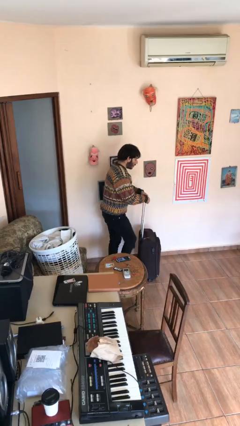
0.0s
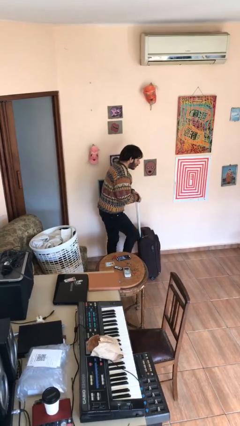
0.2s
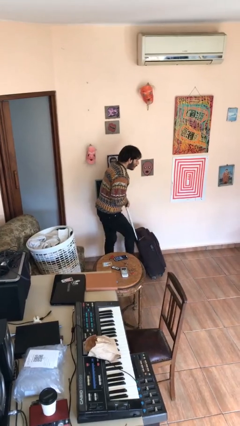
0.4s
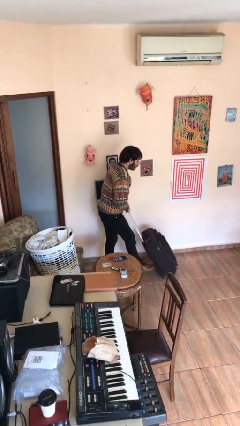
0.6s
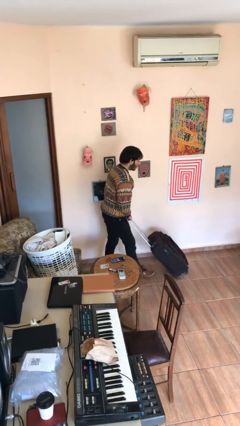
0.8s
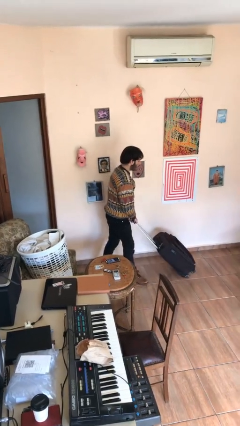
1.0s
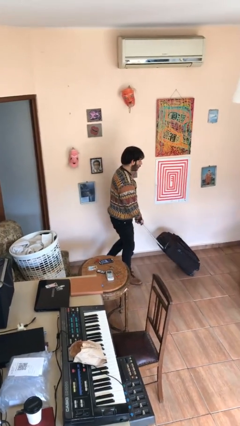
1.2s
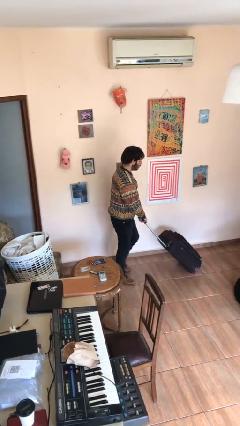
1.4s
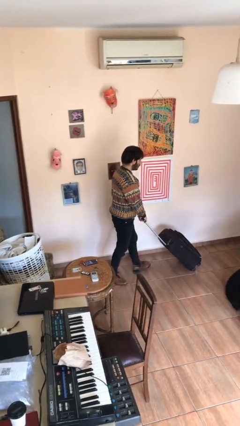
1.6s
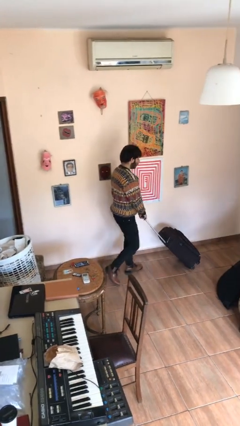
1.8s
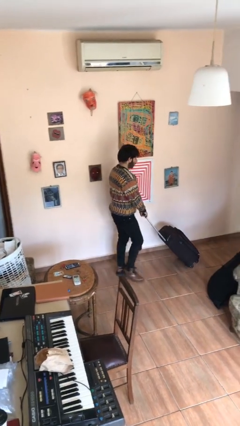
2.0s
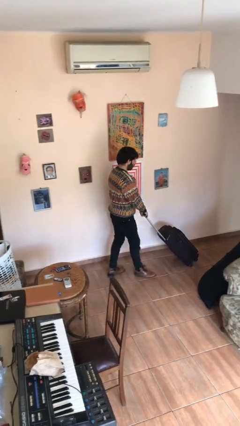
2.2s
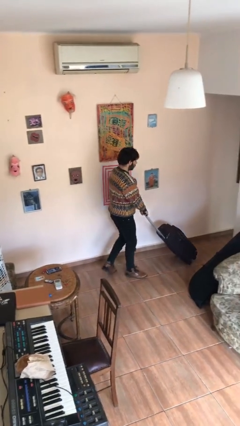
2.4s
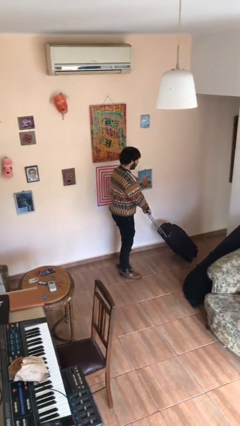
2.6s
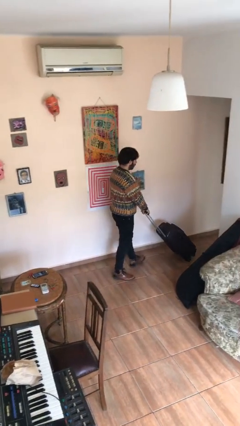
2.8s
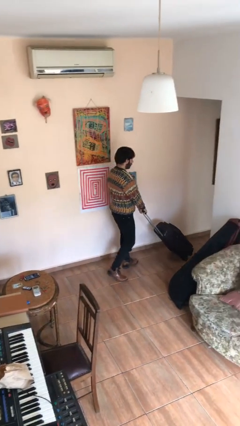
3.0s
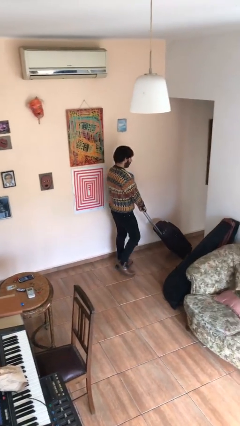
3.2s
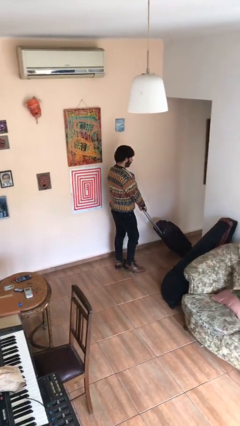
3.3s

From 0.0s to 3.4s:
person pushes wheeled cart

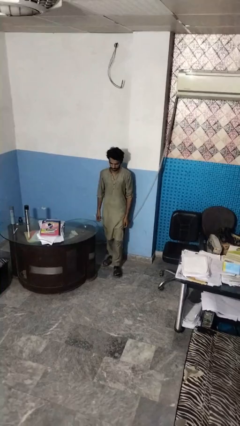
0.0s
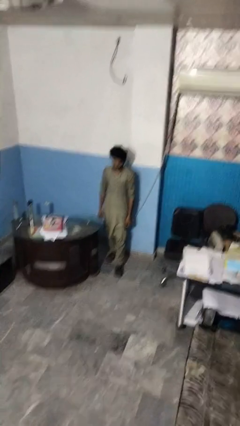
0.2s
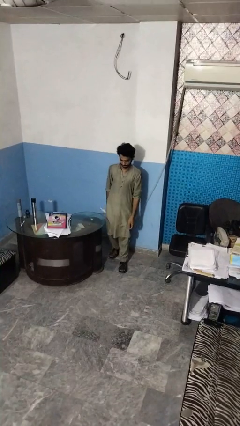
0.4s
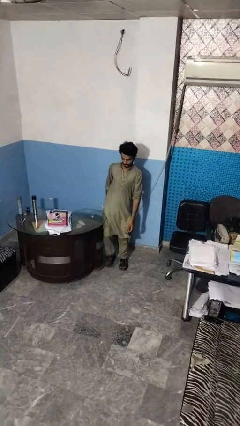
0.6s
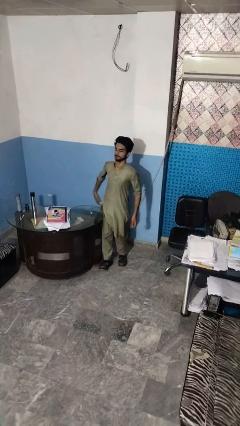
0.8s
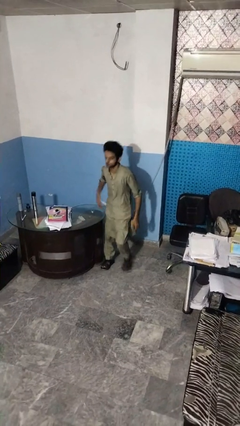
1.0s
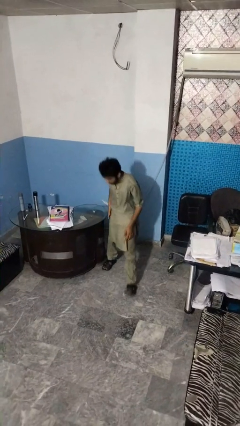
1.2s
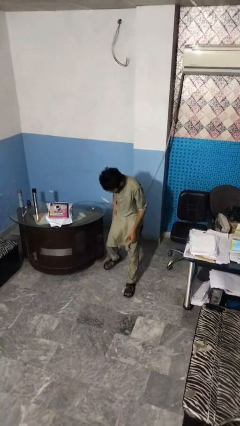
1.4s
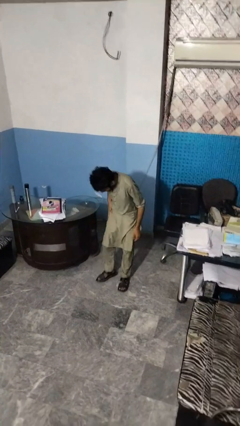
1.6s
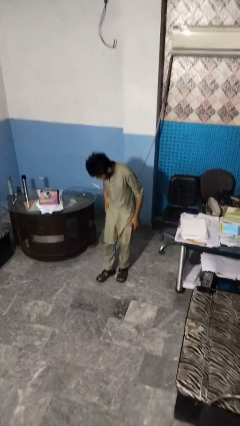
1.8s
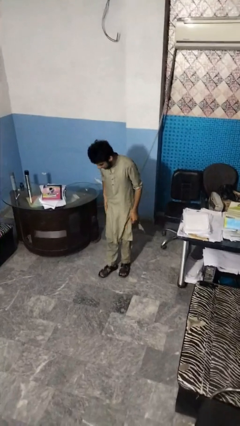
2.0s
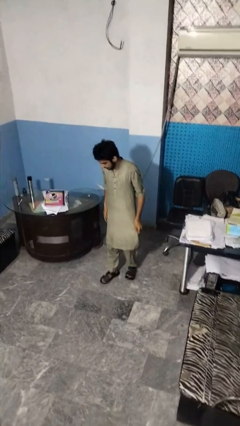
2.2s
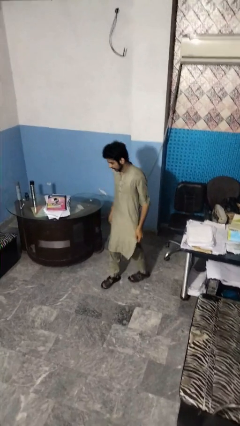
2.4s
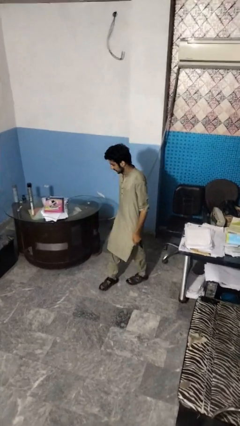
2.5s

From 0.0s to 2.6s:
person bumps into table

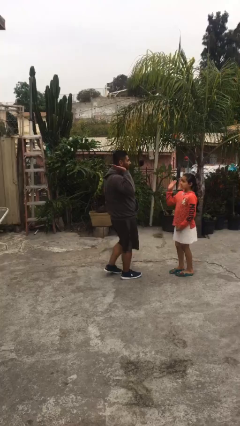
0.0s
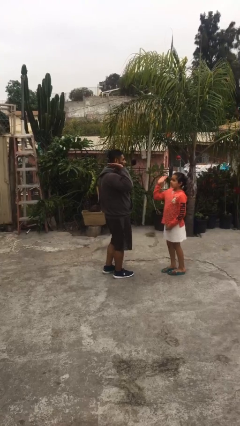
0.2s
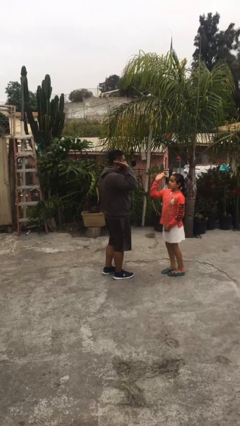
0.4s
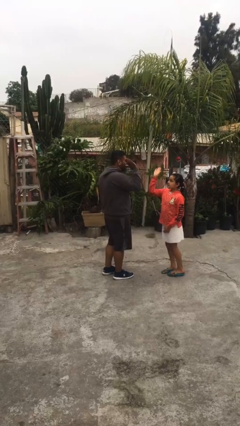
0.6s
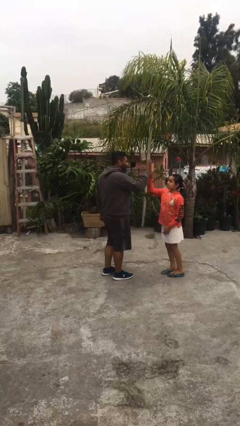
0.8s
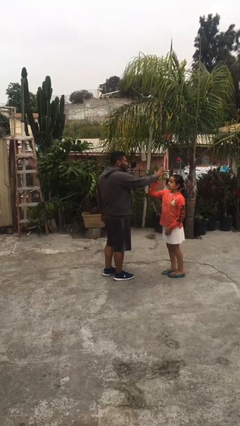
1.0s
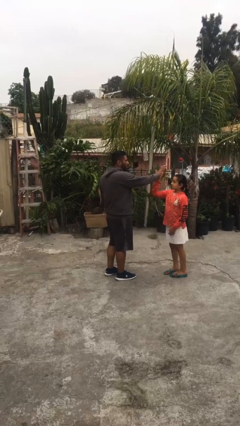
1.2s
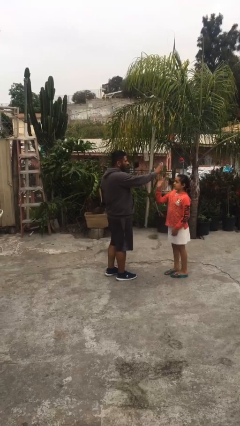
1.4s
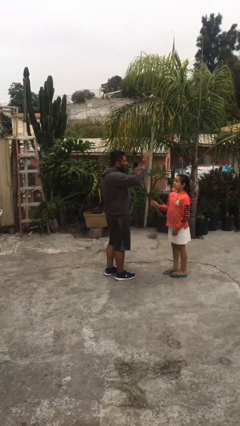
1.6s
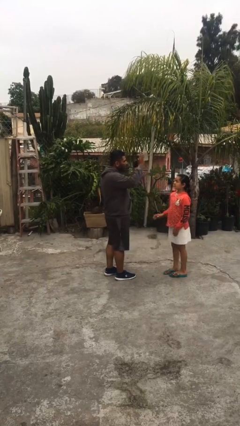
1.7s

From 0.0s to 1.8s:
person highfives hand

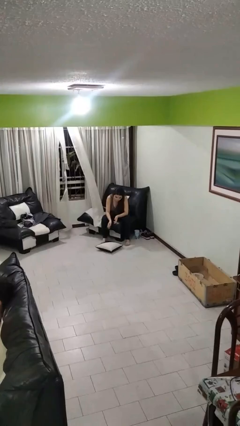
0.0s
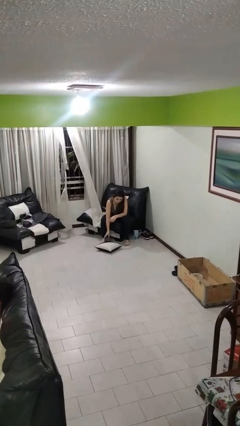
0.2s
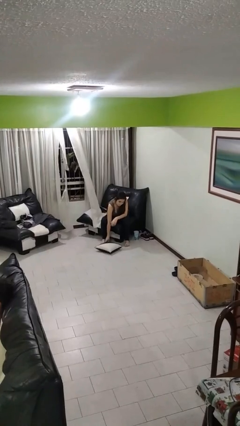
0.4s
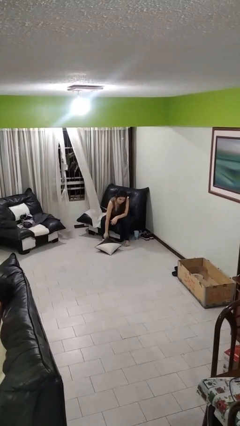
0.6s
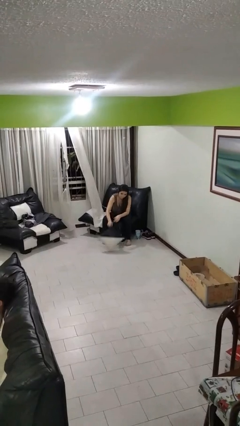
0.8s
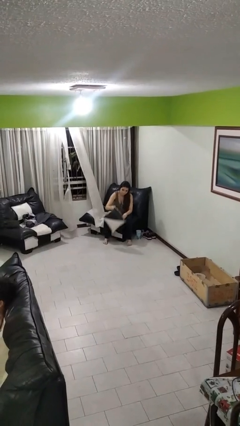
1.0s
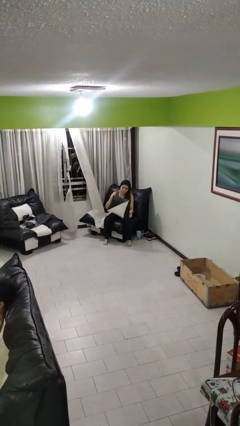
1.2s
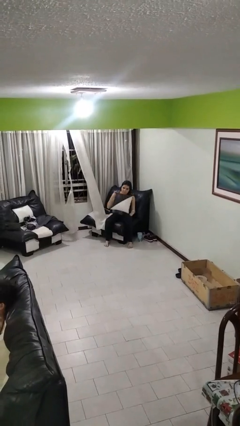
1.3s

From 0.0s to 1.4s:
person picks up object from floor

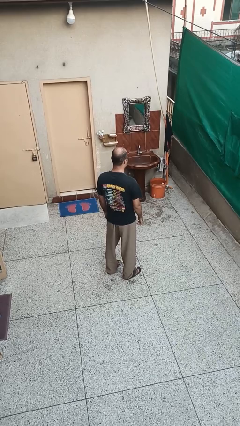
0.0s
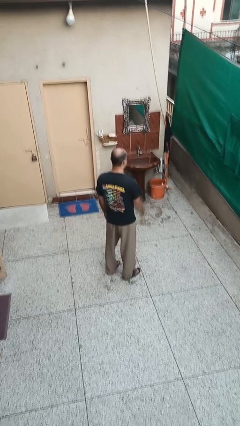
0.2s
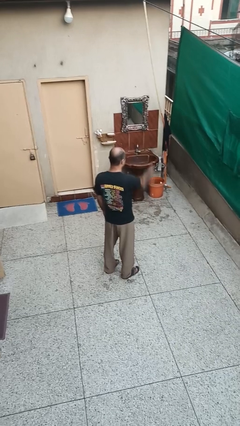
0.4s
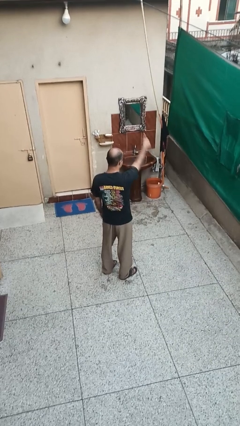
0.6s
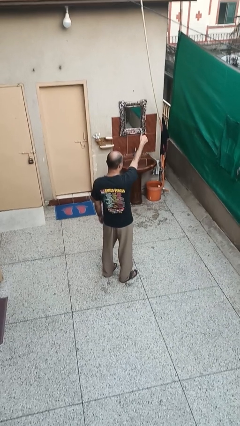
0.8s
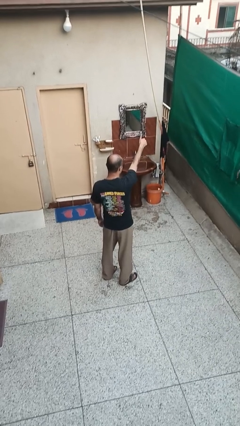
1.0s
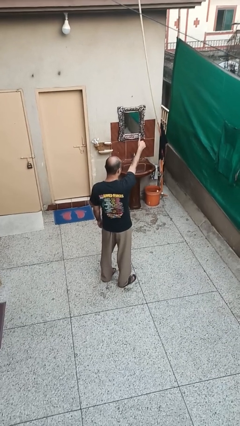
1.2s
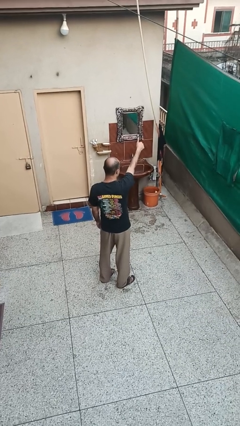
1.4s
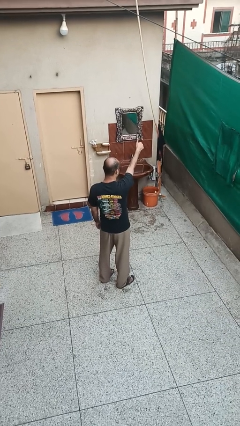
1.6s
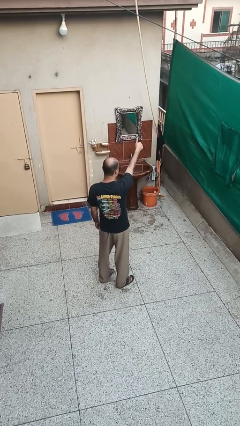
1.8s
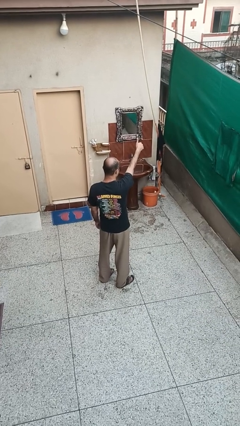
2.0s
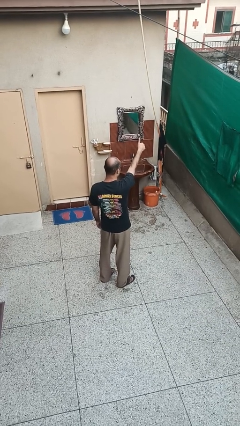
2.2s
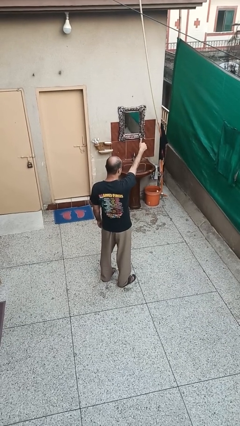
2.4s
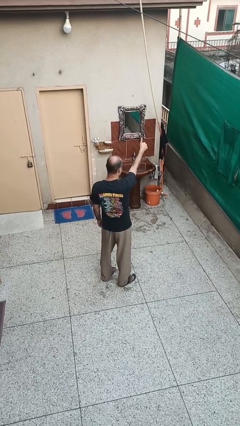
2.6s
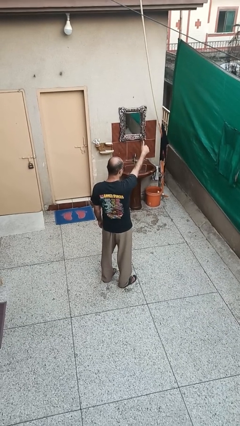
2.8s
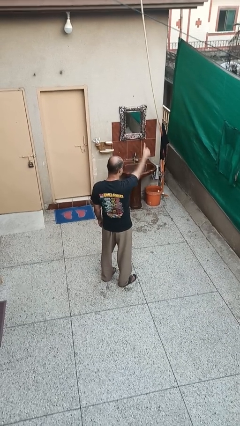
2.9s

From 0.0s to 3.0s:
person gestures thumbs up

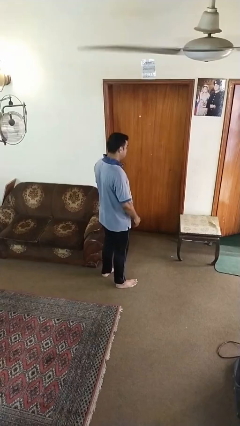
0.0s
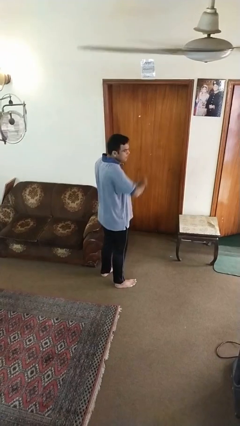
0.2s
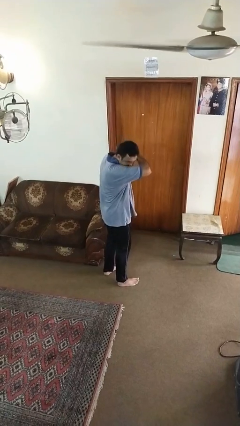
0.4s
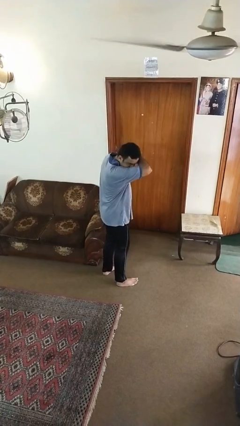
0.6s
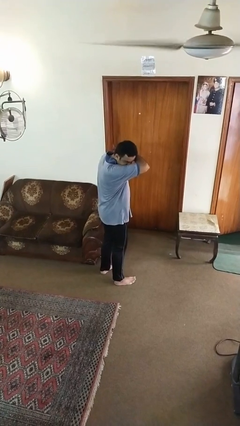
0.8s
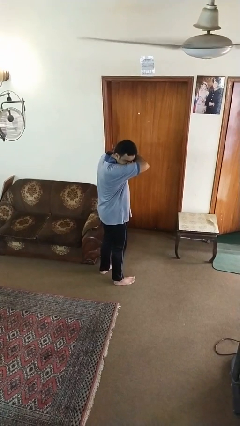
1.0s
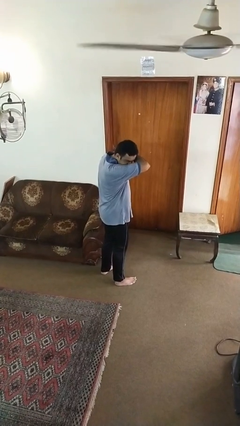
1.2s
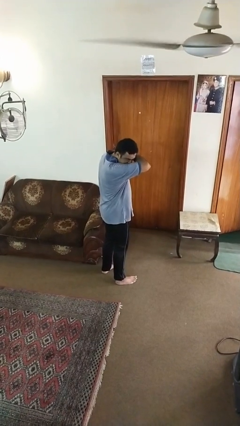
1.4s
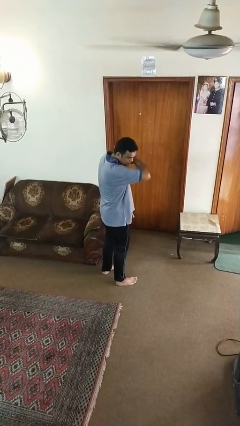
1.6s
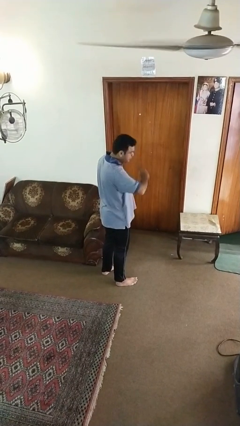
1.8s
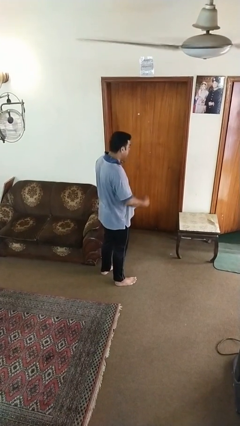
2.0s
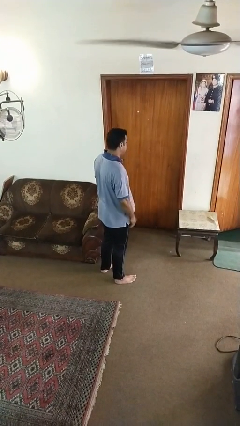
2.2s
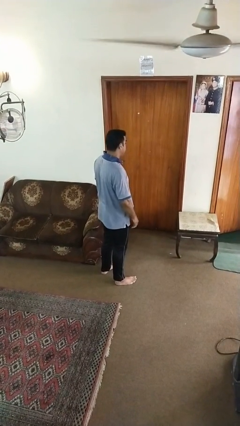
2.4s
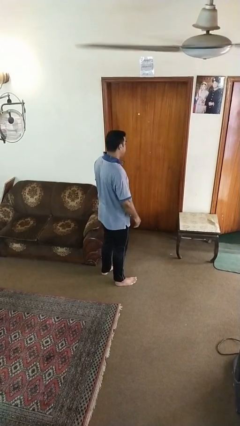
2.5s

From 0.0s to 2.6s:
person sneezes into arm

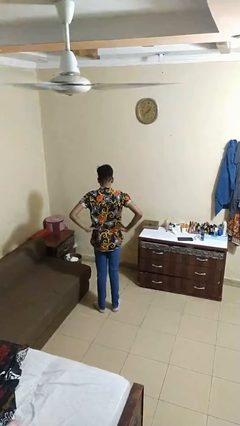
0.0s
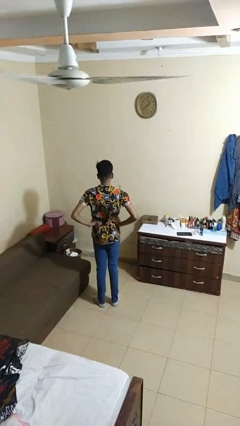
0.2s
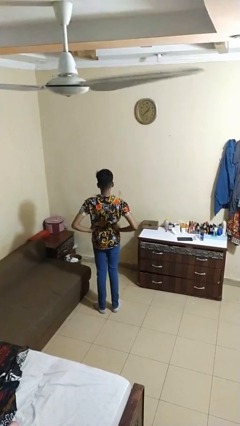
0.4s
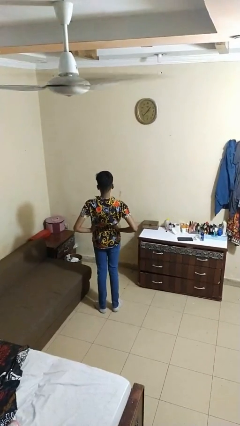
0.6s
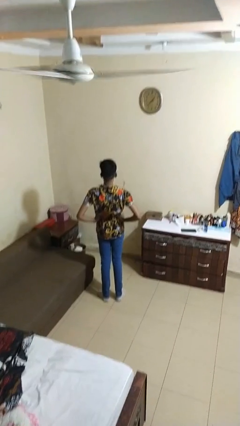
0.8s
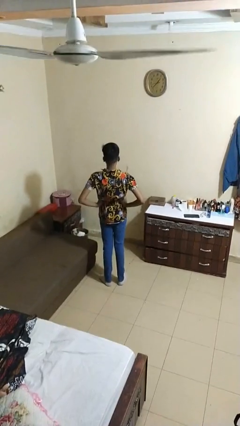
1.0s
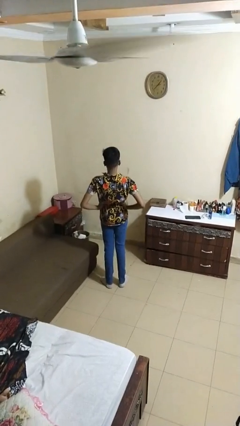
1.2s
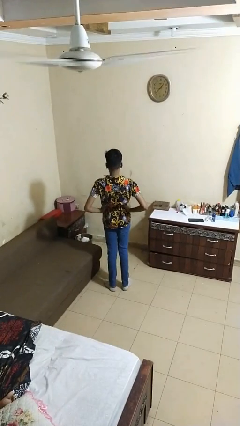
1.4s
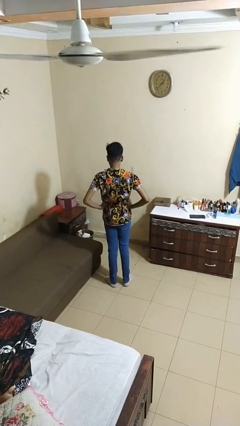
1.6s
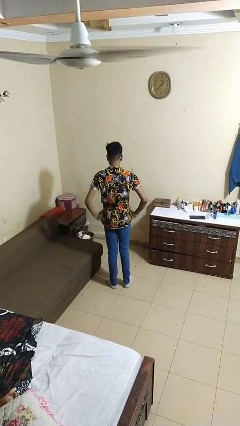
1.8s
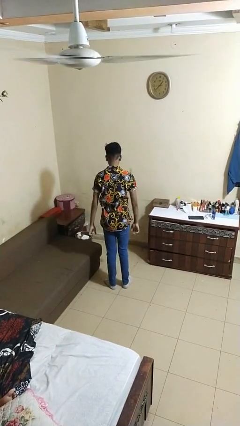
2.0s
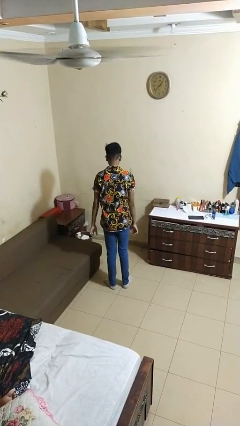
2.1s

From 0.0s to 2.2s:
person stretches back
